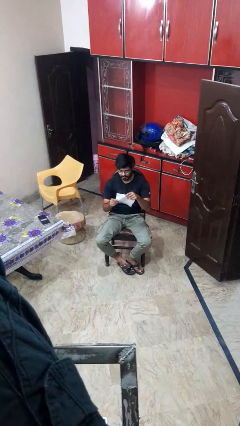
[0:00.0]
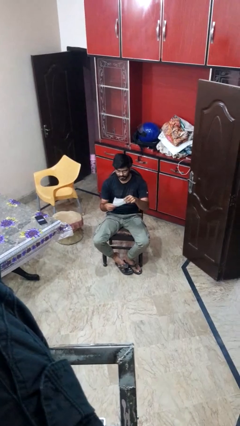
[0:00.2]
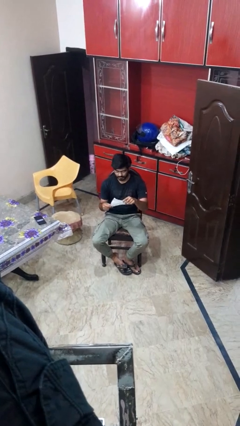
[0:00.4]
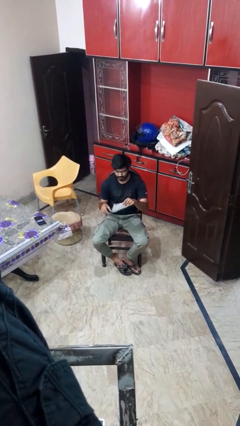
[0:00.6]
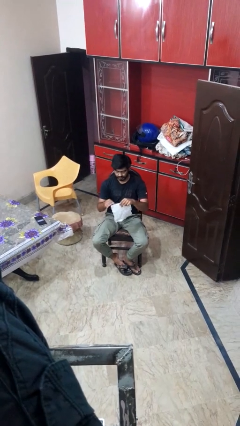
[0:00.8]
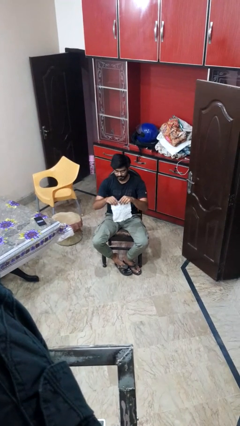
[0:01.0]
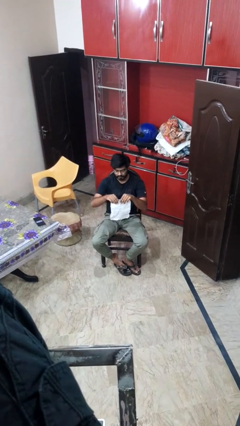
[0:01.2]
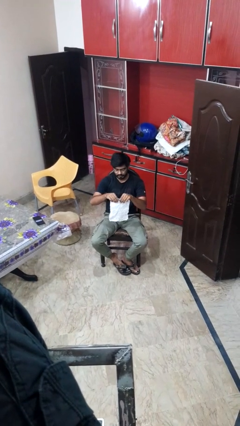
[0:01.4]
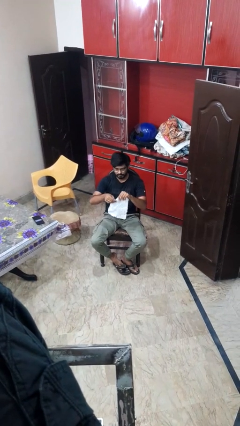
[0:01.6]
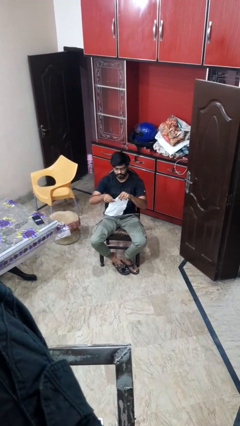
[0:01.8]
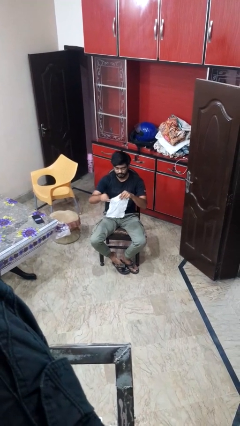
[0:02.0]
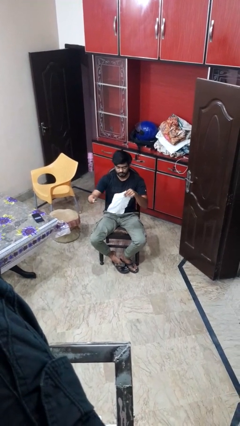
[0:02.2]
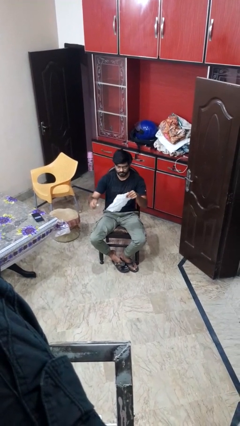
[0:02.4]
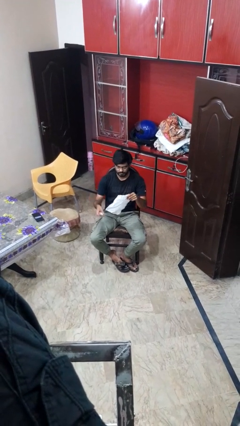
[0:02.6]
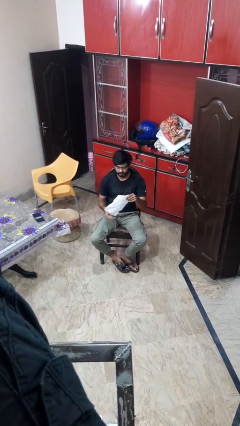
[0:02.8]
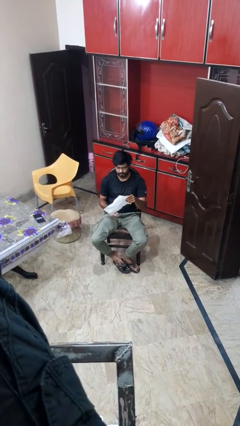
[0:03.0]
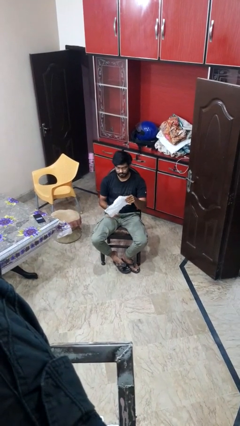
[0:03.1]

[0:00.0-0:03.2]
person tears paper

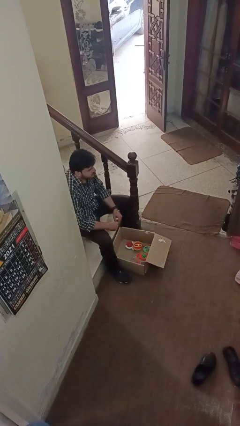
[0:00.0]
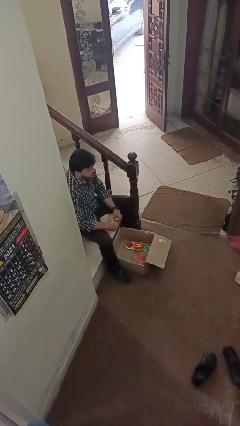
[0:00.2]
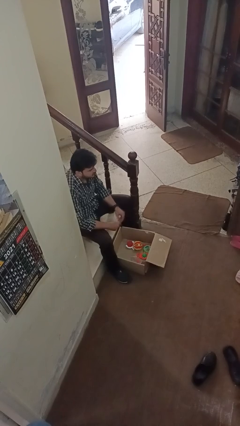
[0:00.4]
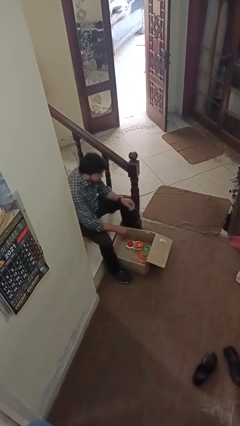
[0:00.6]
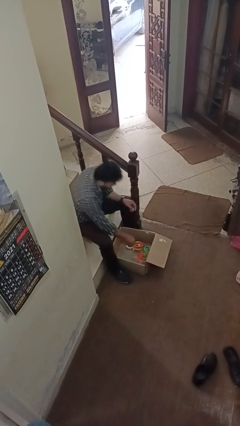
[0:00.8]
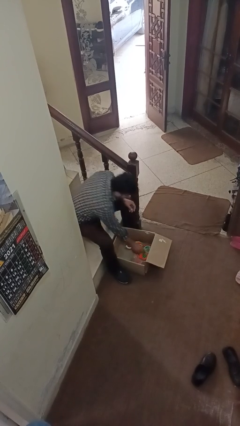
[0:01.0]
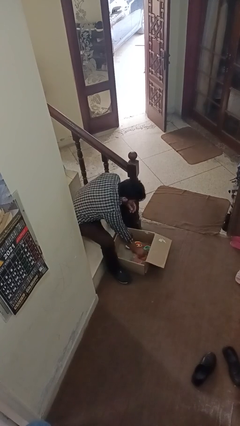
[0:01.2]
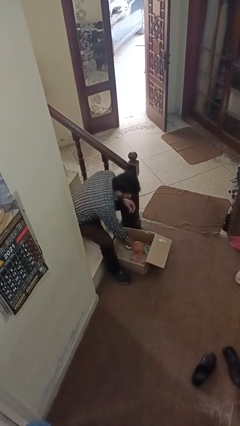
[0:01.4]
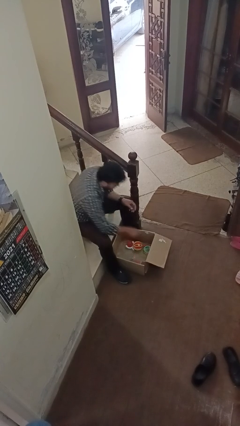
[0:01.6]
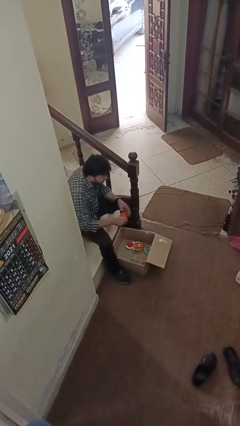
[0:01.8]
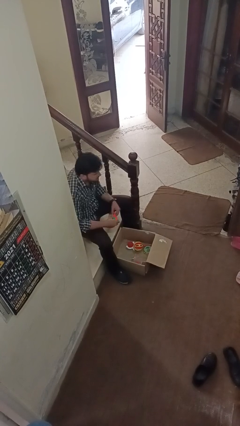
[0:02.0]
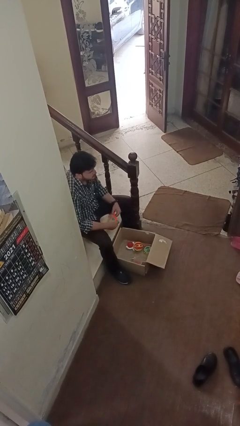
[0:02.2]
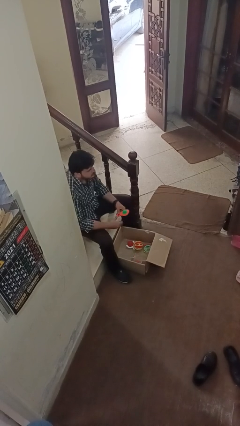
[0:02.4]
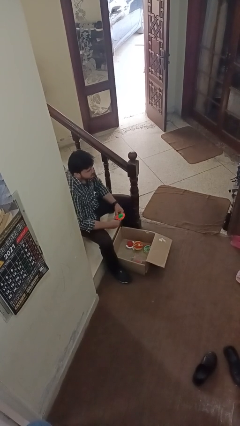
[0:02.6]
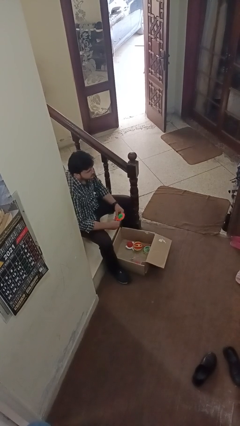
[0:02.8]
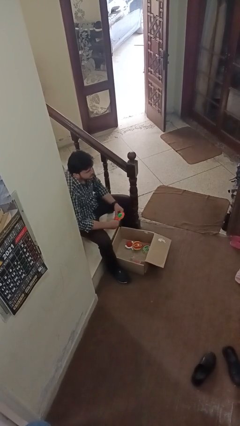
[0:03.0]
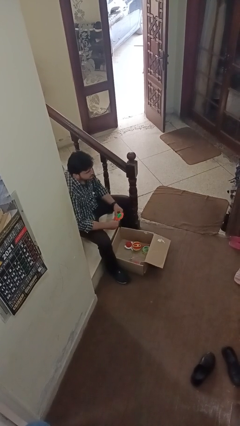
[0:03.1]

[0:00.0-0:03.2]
person takes object from box

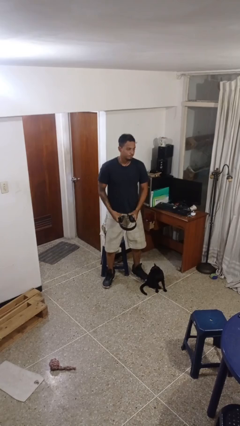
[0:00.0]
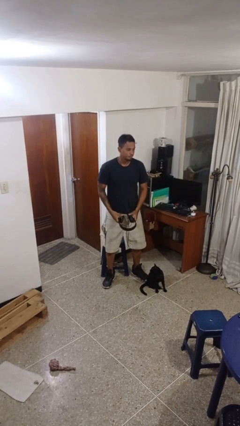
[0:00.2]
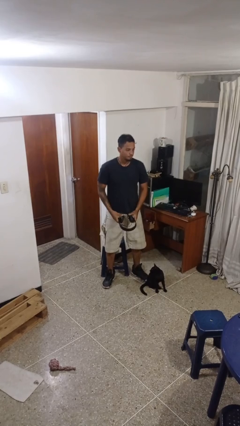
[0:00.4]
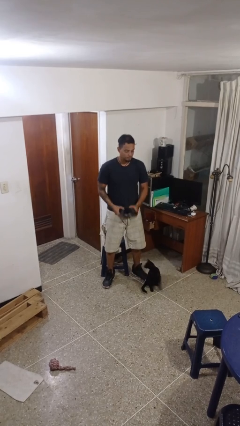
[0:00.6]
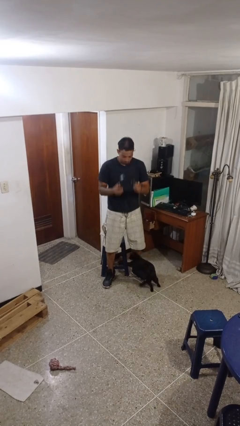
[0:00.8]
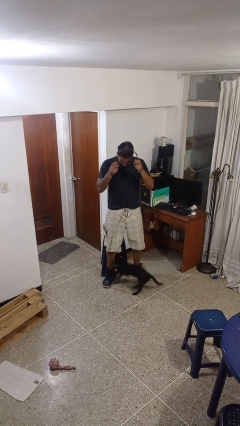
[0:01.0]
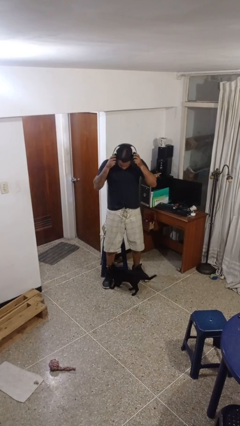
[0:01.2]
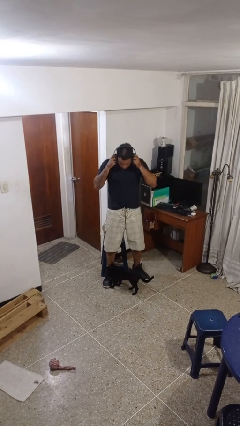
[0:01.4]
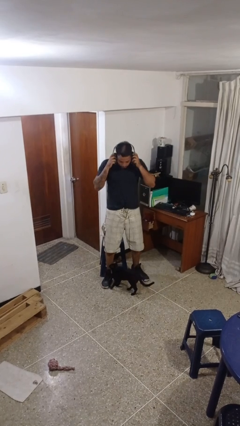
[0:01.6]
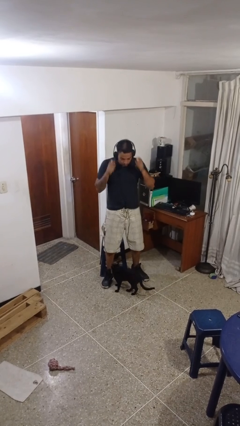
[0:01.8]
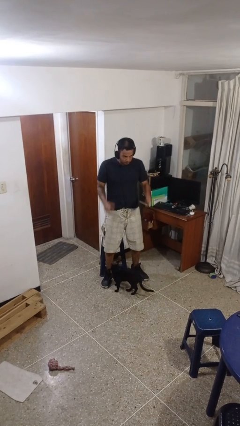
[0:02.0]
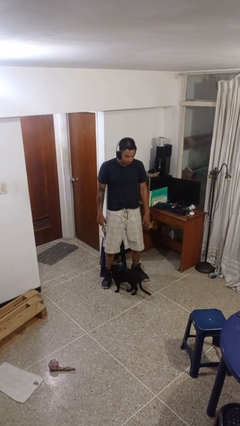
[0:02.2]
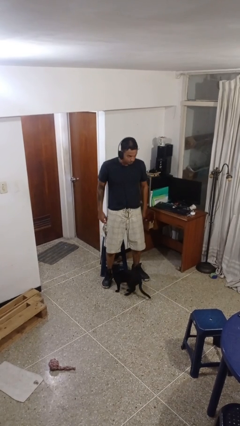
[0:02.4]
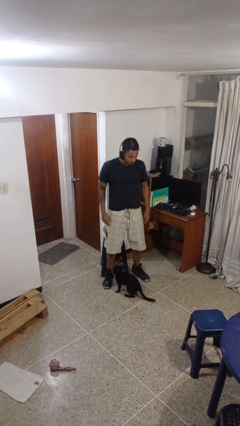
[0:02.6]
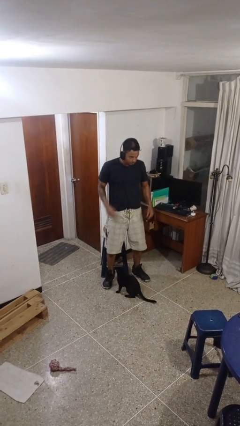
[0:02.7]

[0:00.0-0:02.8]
person puts on headphones

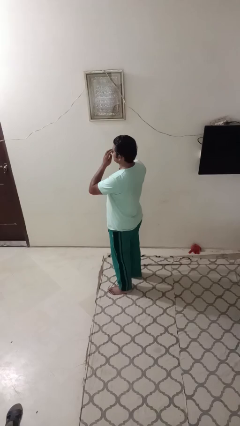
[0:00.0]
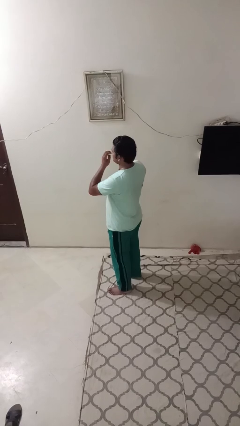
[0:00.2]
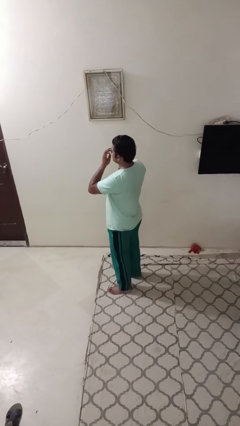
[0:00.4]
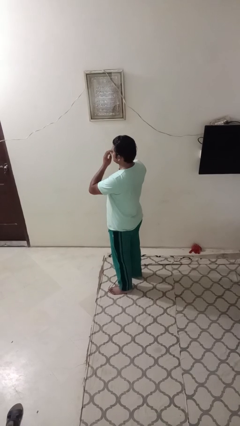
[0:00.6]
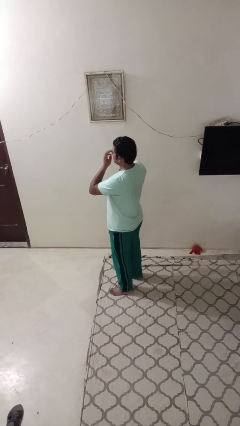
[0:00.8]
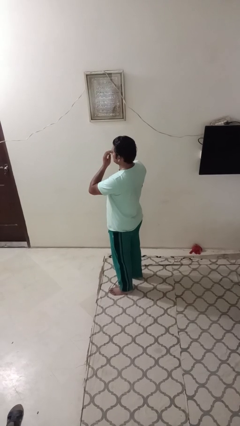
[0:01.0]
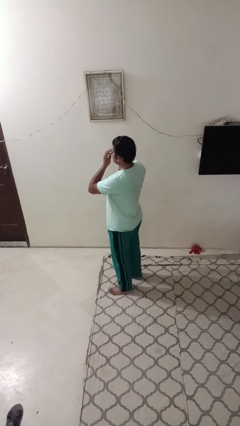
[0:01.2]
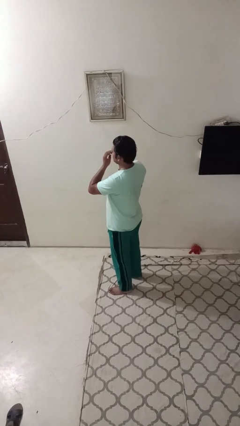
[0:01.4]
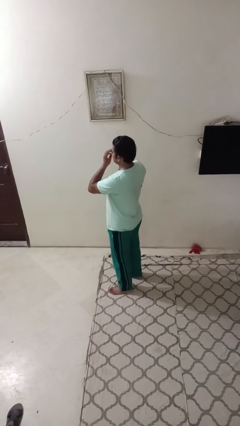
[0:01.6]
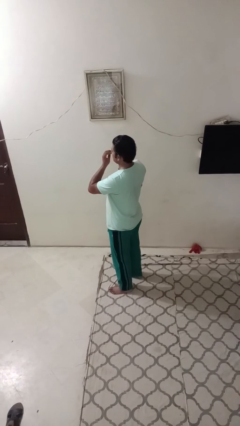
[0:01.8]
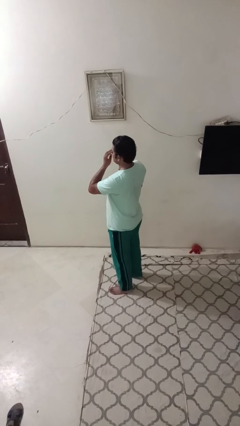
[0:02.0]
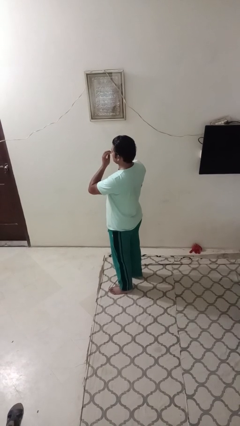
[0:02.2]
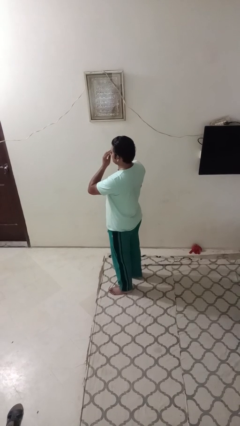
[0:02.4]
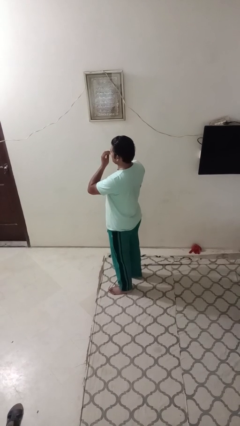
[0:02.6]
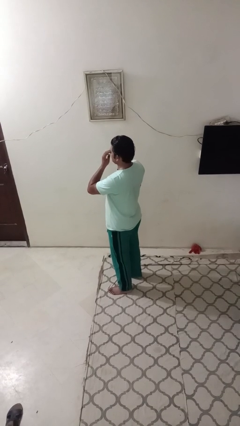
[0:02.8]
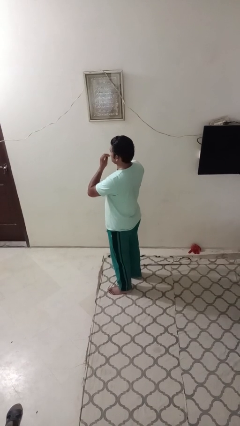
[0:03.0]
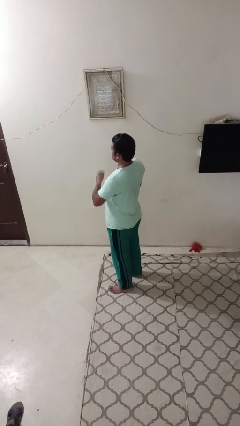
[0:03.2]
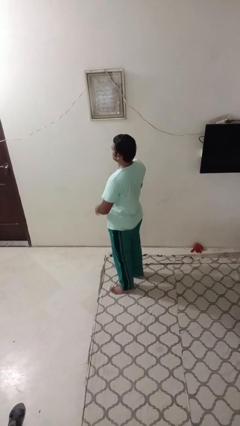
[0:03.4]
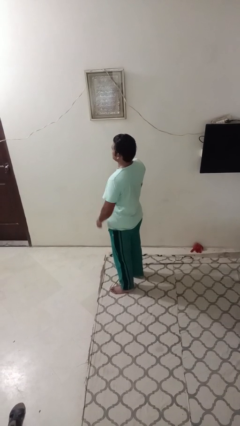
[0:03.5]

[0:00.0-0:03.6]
person scratches face

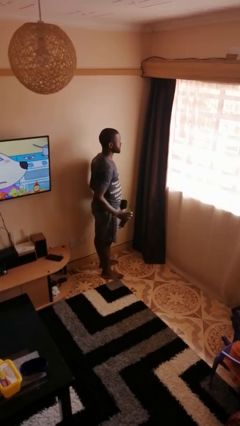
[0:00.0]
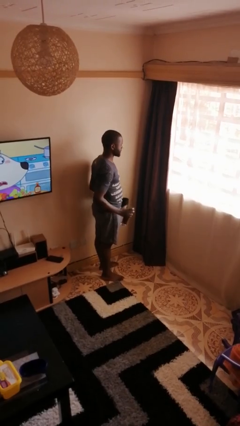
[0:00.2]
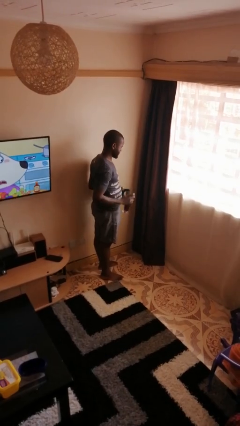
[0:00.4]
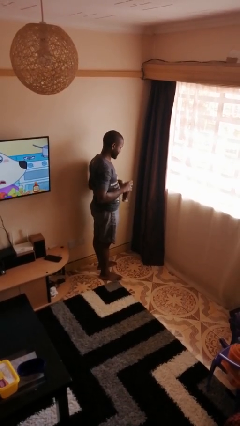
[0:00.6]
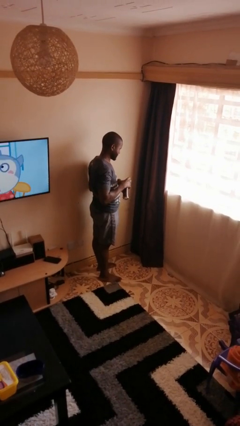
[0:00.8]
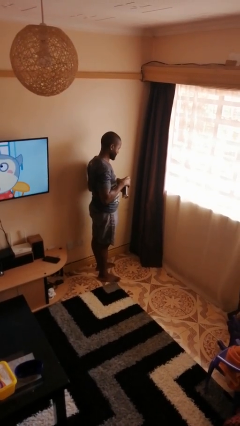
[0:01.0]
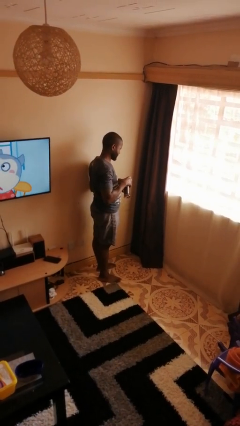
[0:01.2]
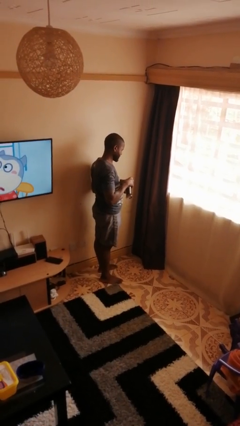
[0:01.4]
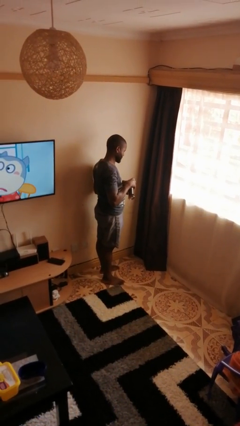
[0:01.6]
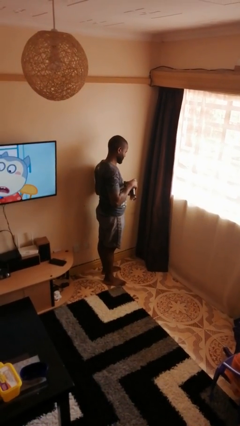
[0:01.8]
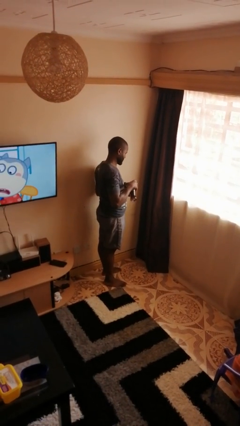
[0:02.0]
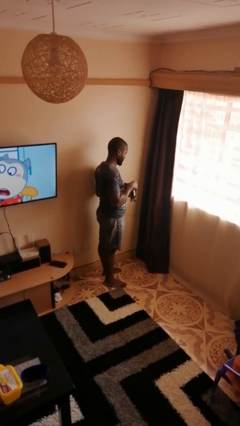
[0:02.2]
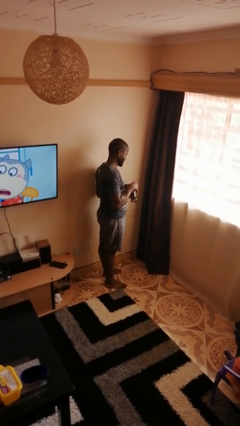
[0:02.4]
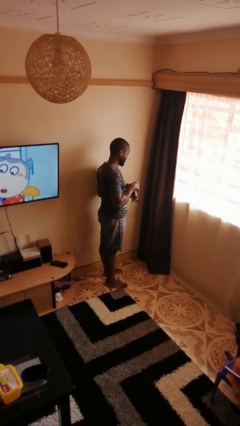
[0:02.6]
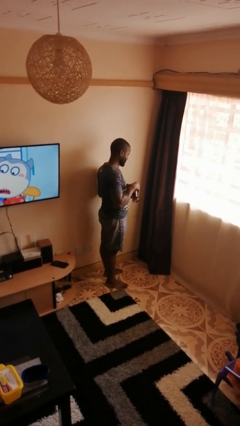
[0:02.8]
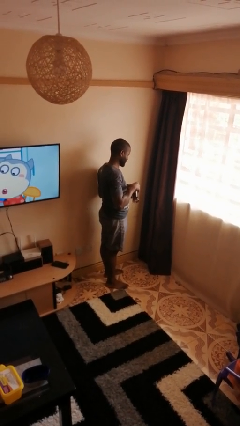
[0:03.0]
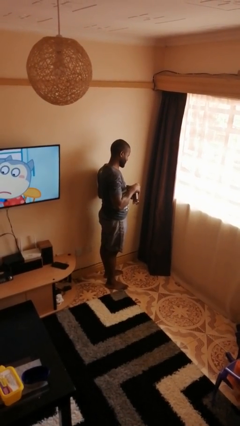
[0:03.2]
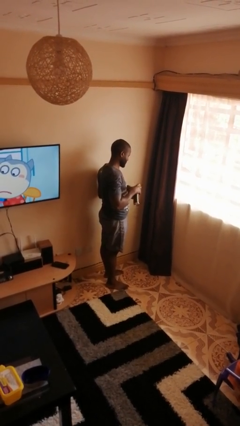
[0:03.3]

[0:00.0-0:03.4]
person pours coffee into mug

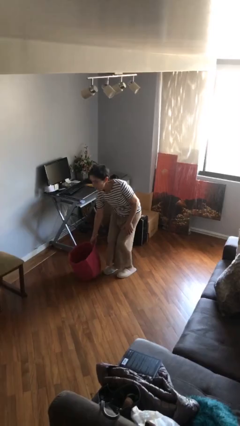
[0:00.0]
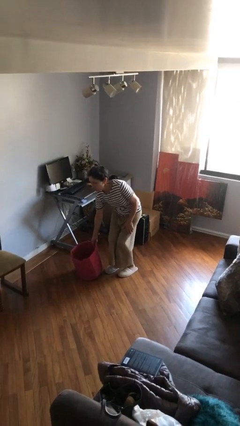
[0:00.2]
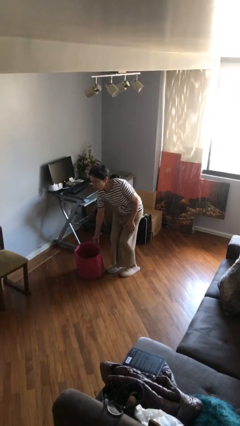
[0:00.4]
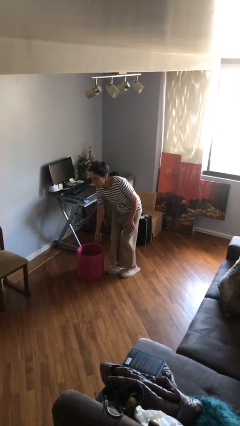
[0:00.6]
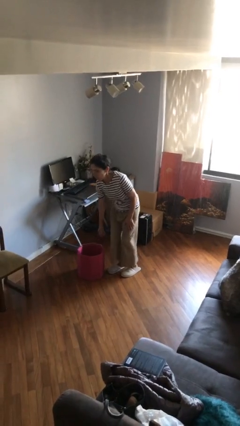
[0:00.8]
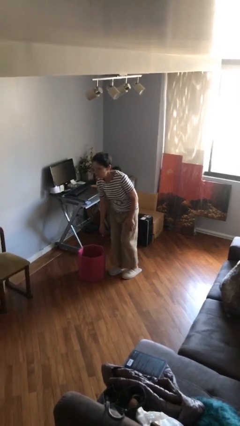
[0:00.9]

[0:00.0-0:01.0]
person puts down object on floor

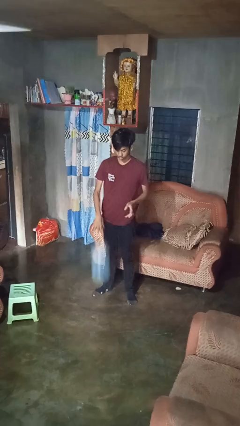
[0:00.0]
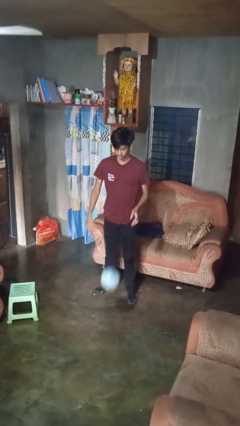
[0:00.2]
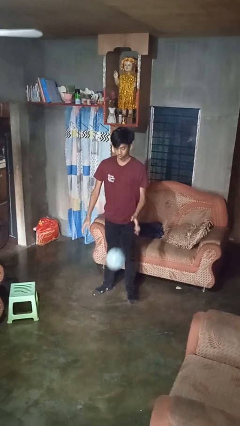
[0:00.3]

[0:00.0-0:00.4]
person bounces ball on floor
